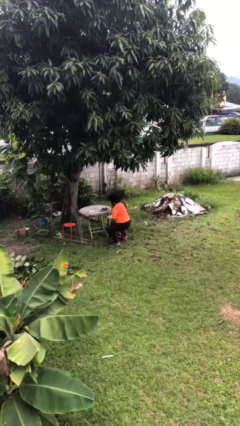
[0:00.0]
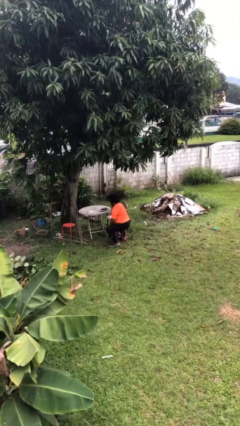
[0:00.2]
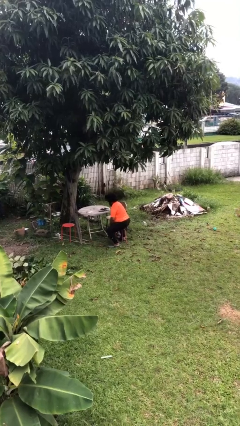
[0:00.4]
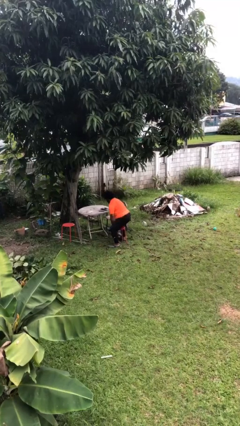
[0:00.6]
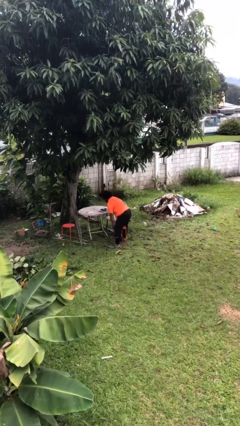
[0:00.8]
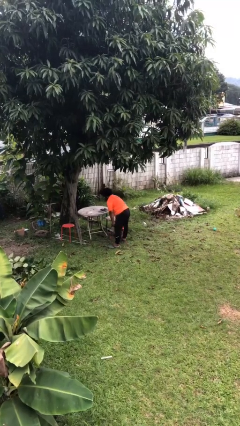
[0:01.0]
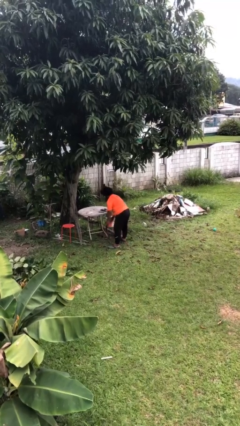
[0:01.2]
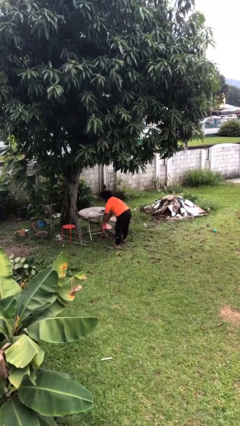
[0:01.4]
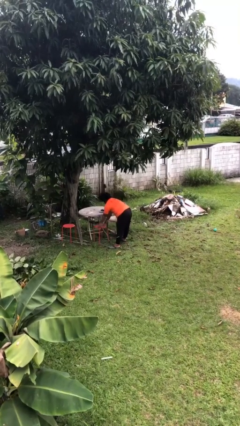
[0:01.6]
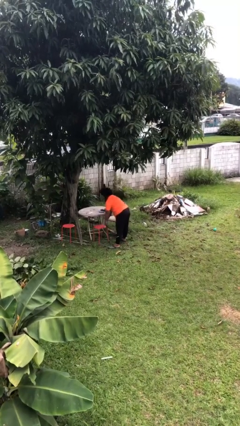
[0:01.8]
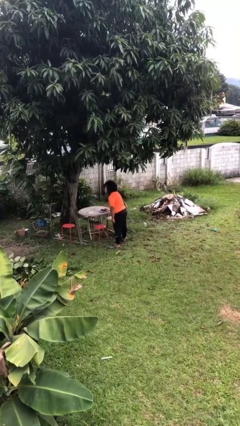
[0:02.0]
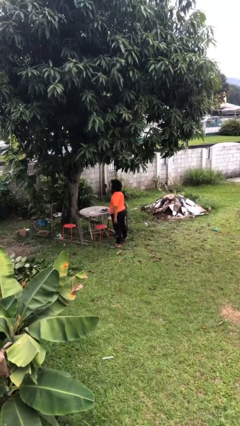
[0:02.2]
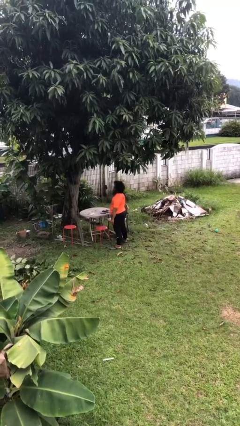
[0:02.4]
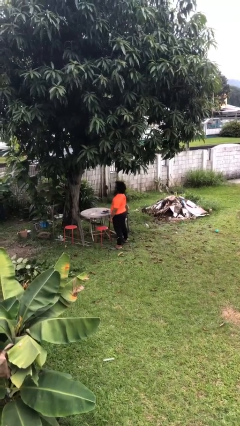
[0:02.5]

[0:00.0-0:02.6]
person stands up

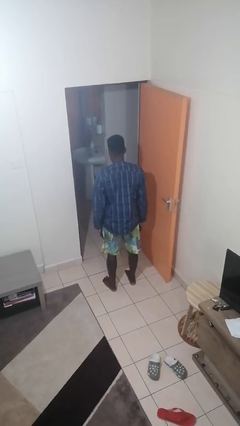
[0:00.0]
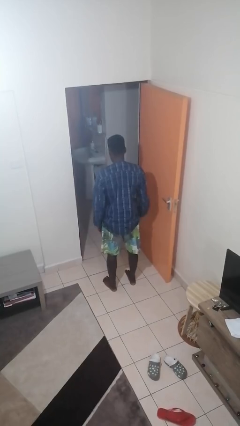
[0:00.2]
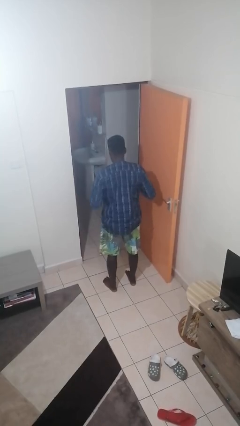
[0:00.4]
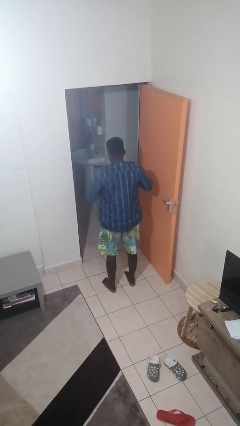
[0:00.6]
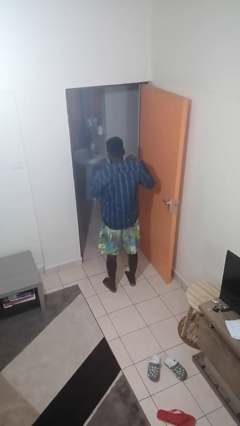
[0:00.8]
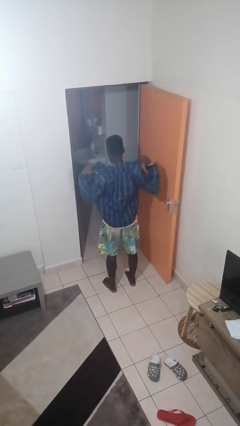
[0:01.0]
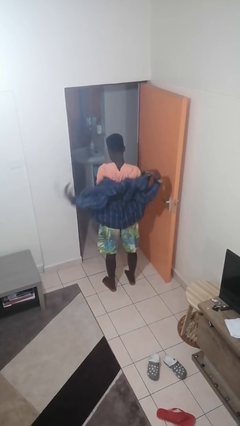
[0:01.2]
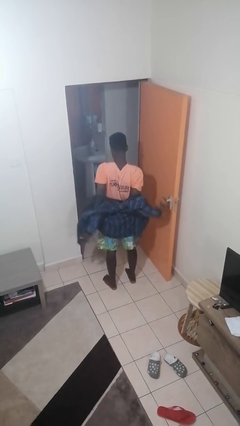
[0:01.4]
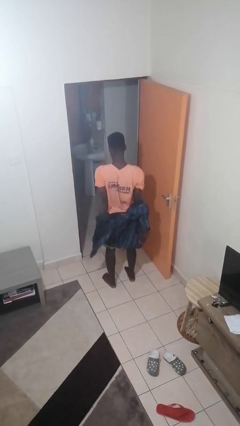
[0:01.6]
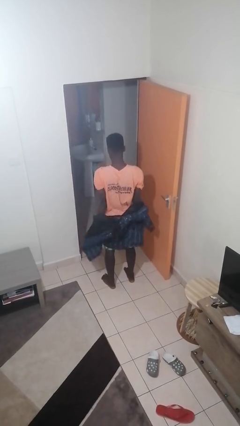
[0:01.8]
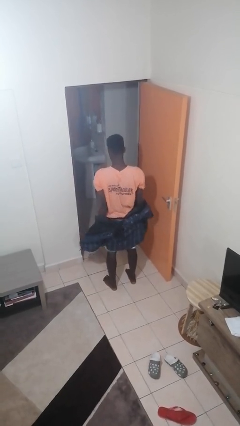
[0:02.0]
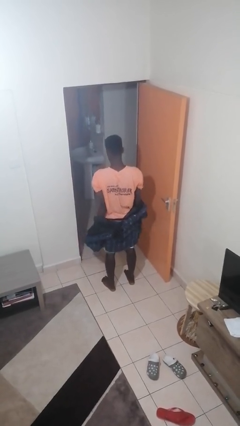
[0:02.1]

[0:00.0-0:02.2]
person takes off jacket

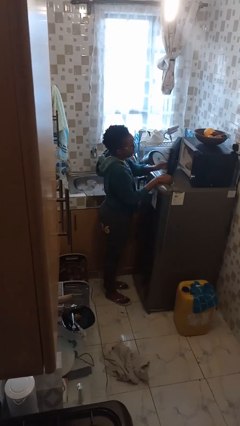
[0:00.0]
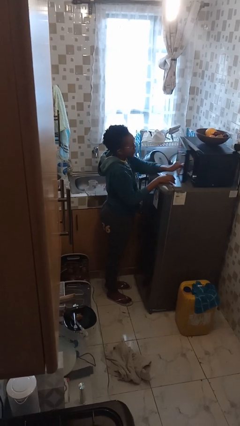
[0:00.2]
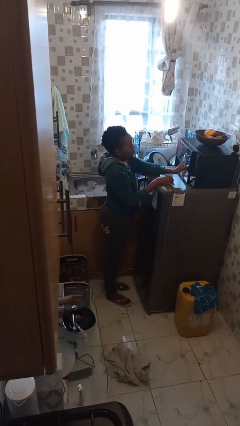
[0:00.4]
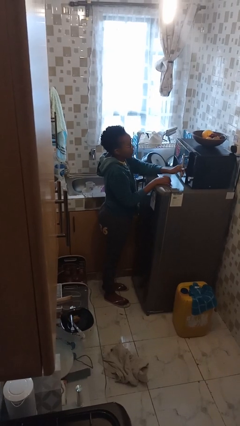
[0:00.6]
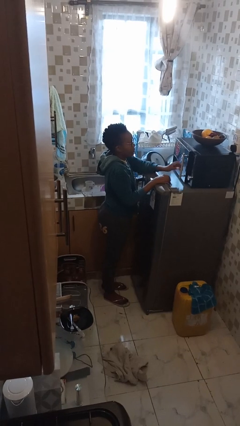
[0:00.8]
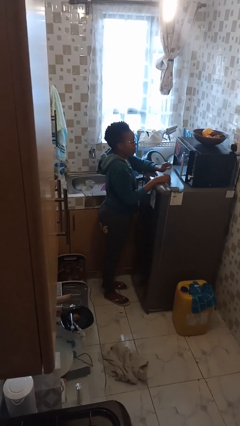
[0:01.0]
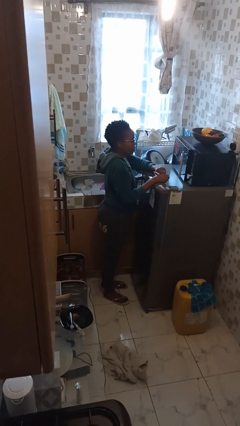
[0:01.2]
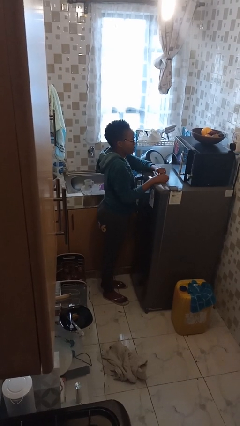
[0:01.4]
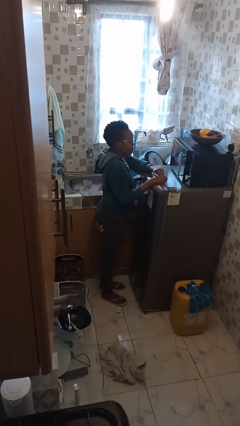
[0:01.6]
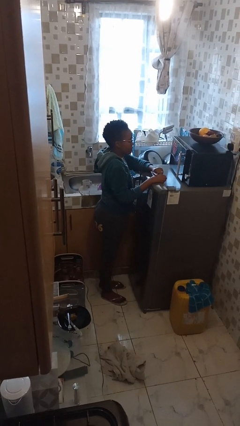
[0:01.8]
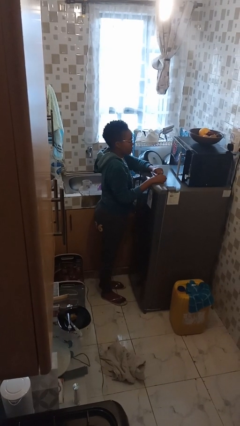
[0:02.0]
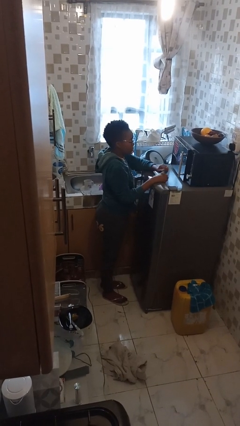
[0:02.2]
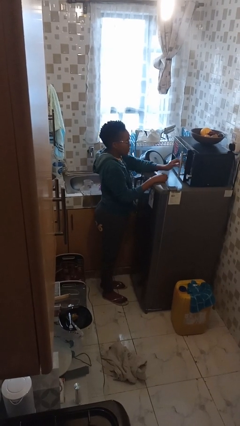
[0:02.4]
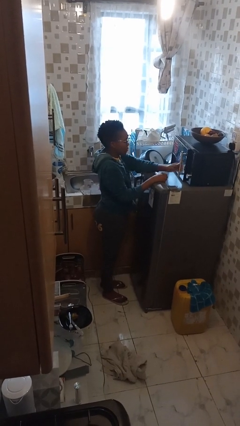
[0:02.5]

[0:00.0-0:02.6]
person closes microwave

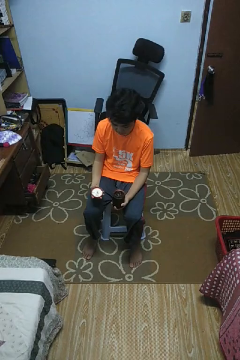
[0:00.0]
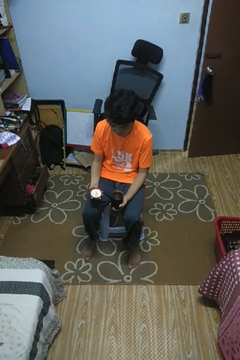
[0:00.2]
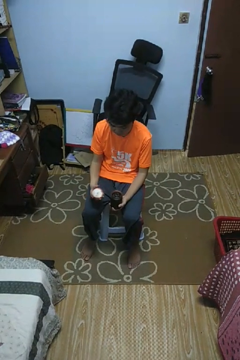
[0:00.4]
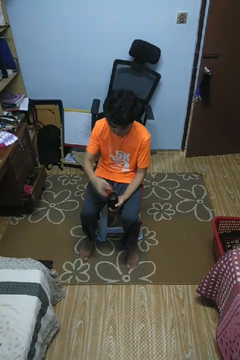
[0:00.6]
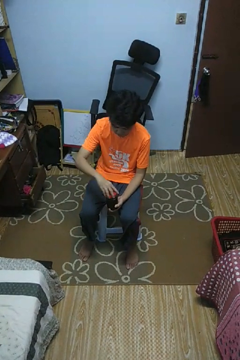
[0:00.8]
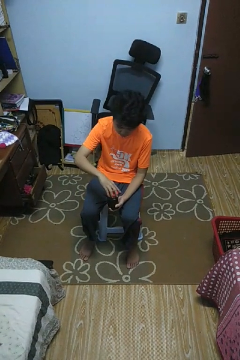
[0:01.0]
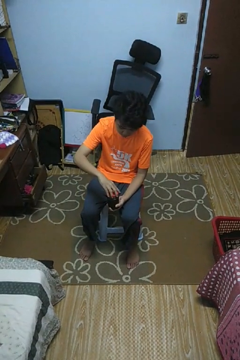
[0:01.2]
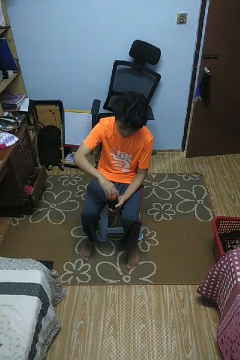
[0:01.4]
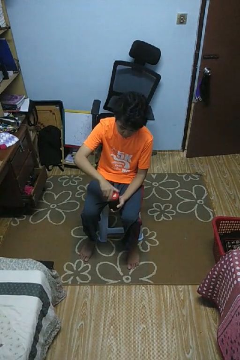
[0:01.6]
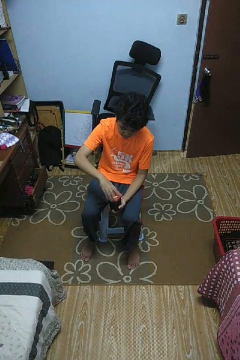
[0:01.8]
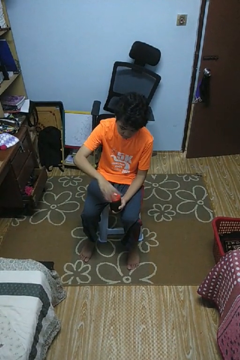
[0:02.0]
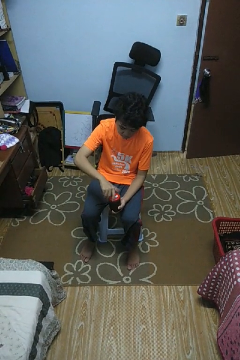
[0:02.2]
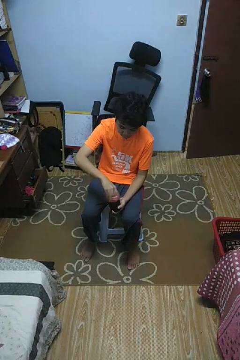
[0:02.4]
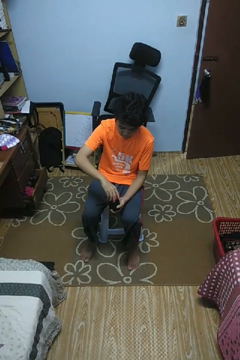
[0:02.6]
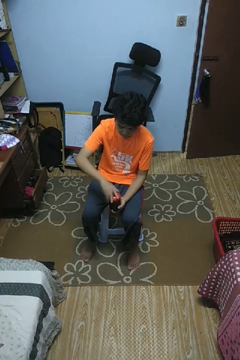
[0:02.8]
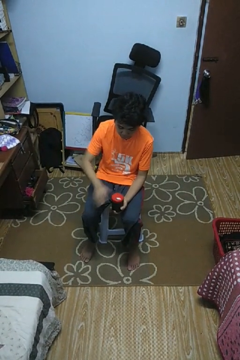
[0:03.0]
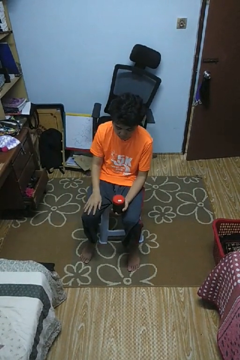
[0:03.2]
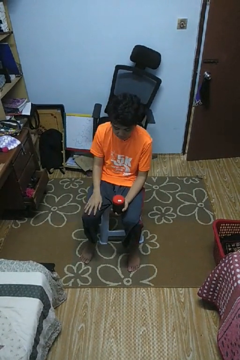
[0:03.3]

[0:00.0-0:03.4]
person closes jar

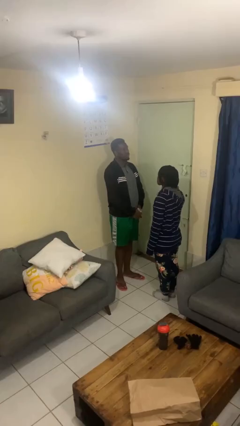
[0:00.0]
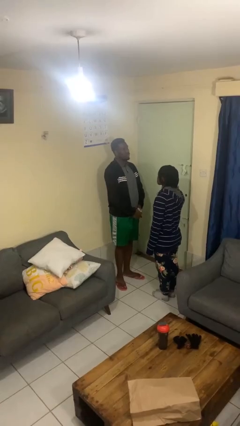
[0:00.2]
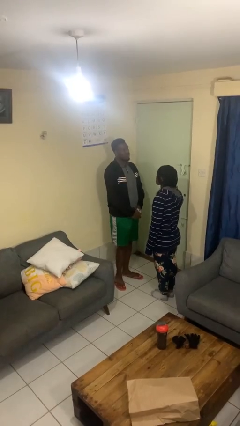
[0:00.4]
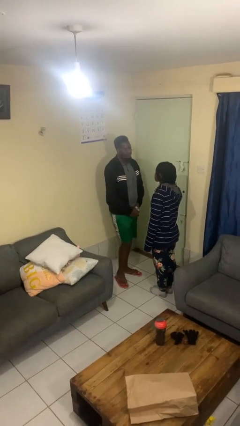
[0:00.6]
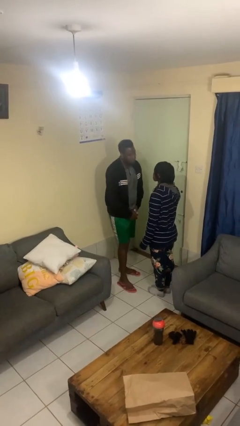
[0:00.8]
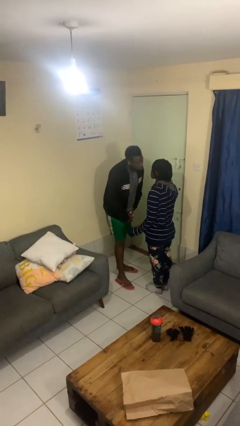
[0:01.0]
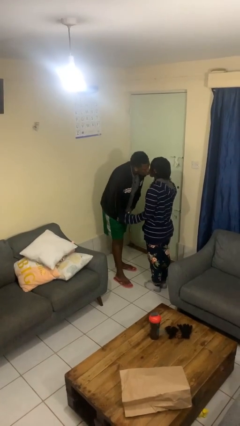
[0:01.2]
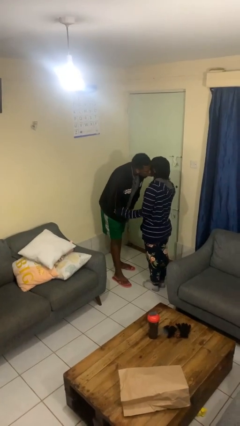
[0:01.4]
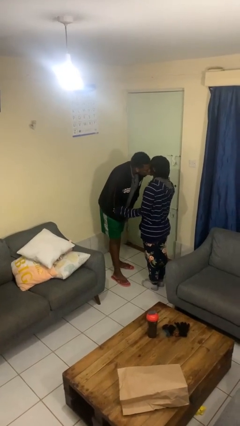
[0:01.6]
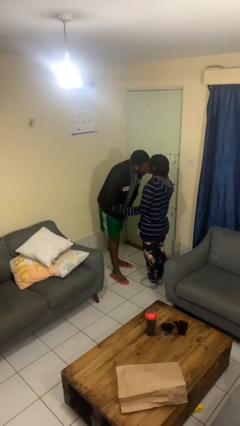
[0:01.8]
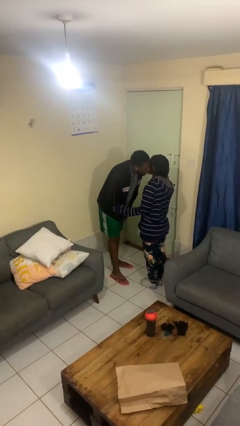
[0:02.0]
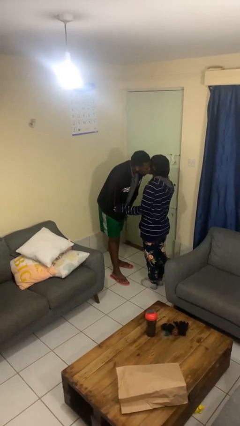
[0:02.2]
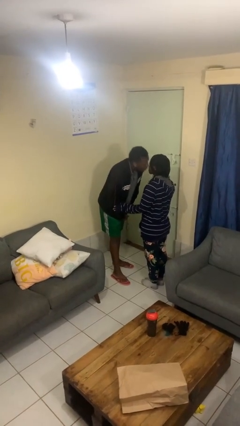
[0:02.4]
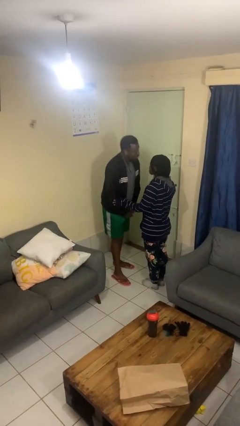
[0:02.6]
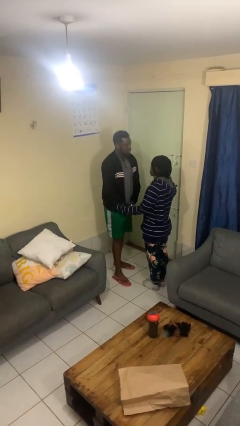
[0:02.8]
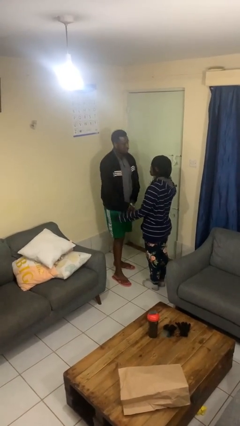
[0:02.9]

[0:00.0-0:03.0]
person kisses cheek of person

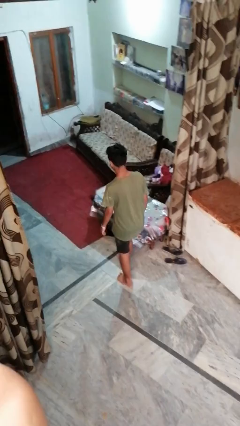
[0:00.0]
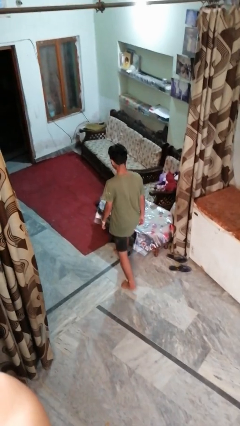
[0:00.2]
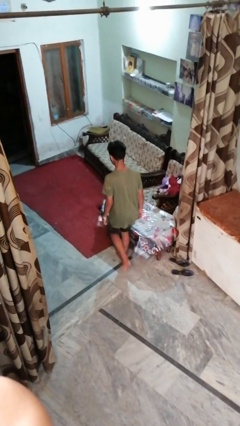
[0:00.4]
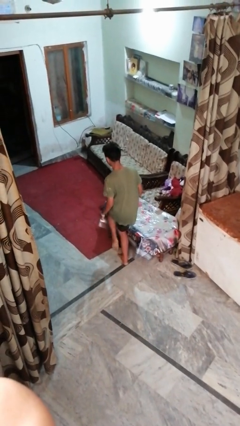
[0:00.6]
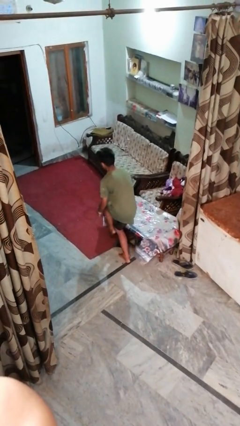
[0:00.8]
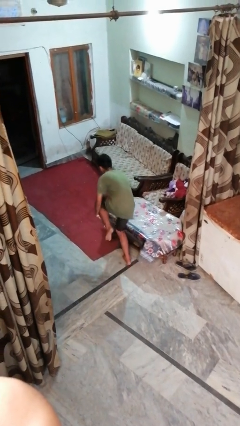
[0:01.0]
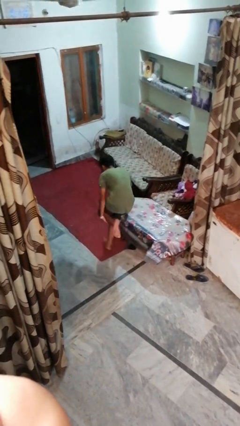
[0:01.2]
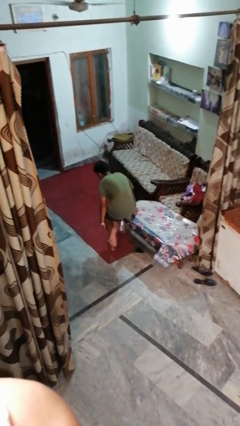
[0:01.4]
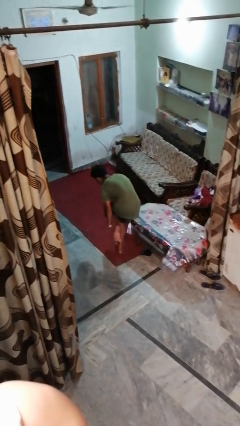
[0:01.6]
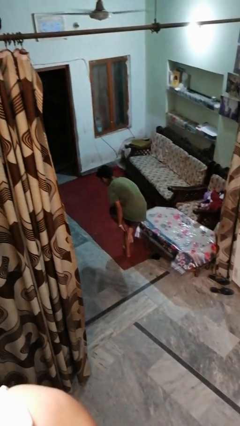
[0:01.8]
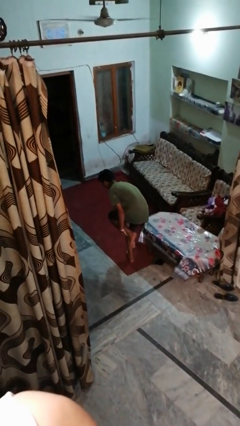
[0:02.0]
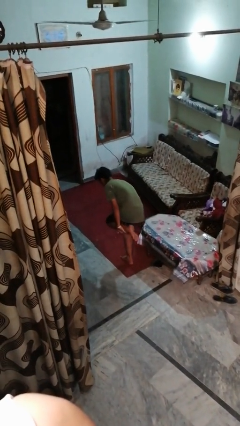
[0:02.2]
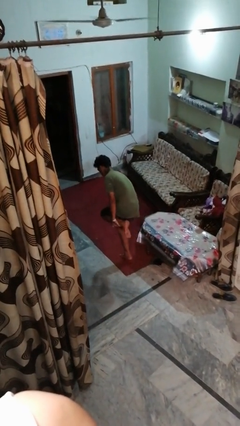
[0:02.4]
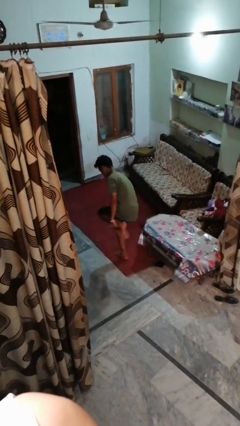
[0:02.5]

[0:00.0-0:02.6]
person stubs toe

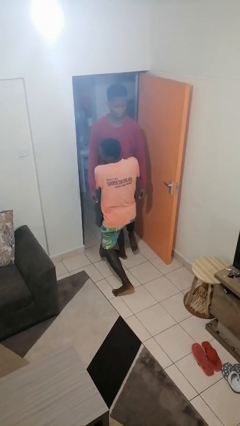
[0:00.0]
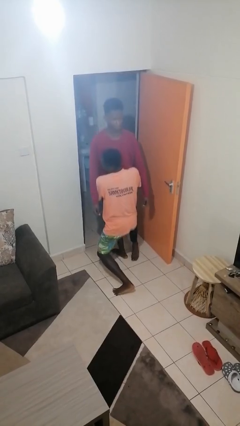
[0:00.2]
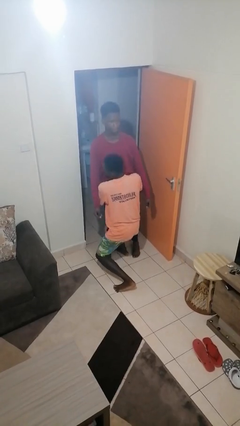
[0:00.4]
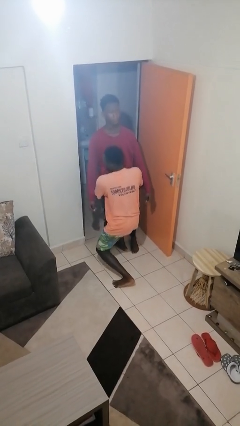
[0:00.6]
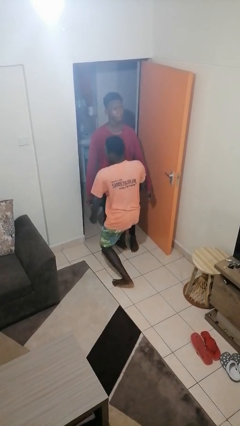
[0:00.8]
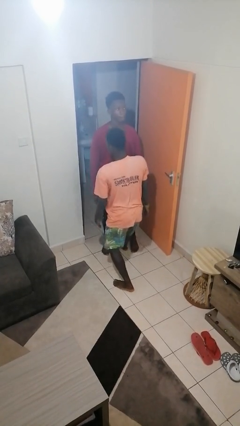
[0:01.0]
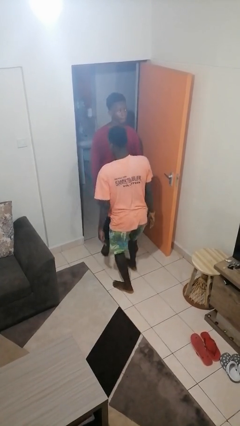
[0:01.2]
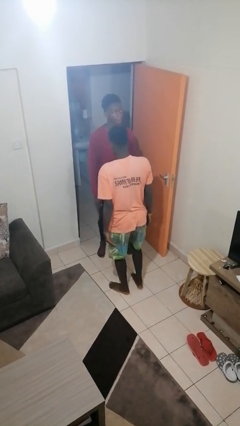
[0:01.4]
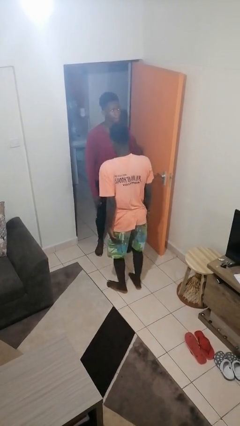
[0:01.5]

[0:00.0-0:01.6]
person puts down person
